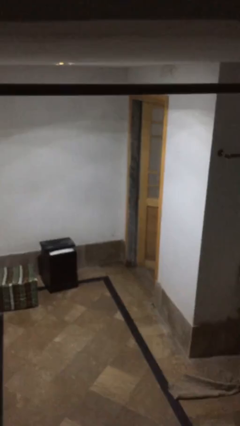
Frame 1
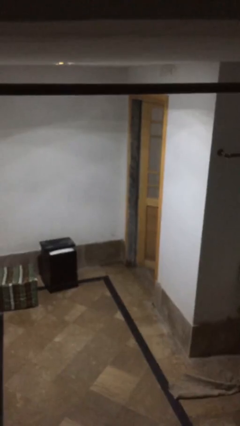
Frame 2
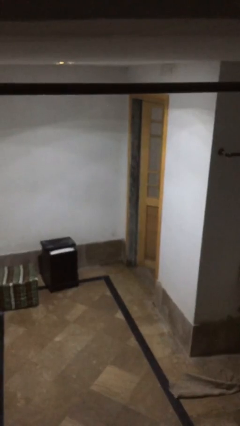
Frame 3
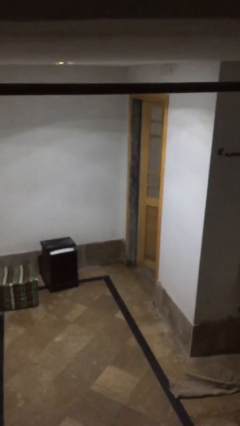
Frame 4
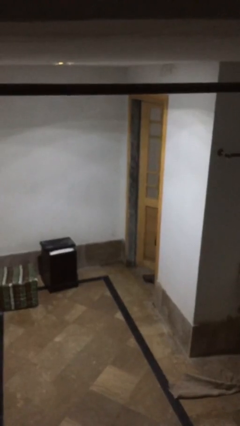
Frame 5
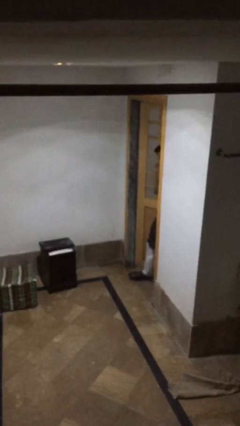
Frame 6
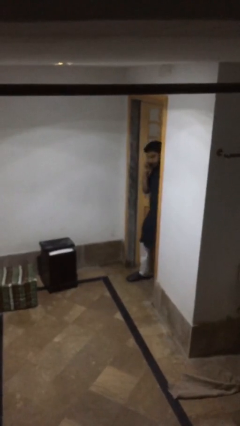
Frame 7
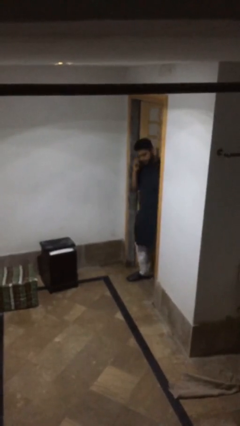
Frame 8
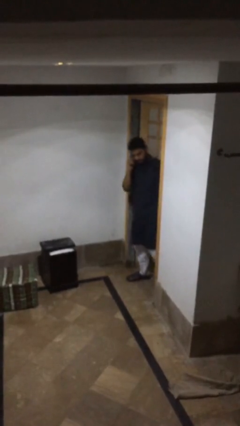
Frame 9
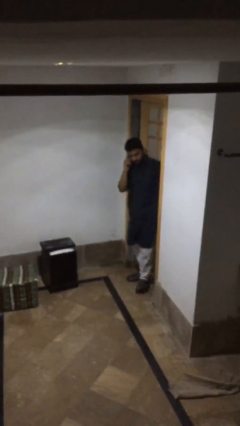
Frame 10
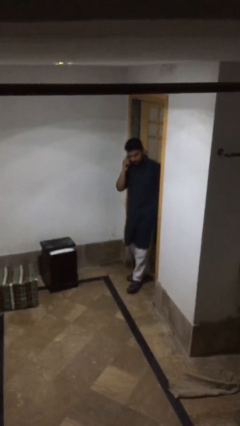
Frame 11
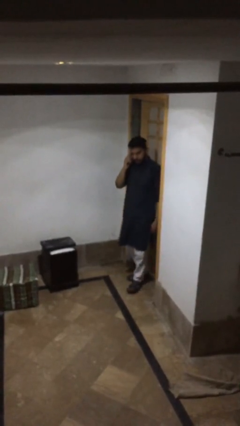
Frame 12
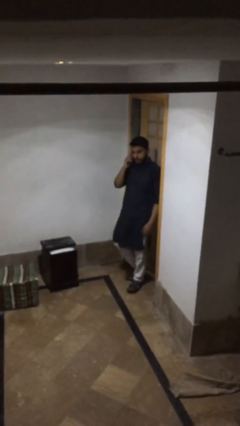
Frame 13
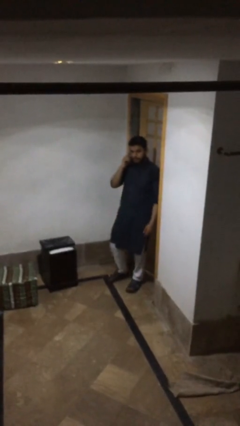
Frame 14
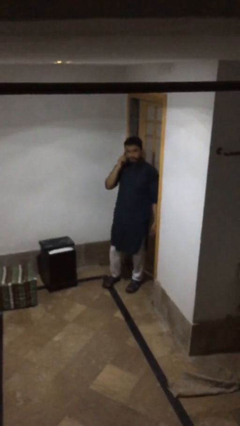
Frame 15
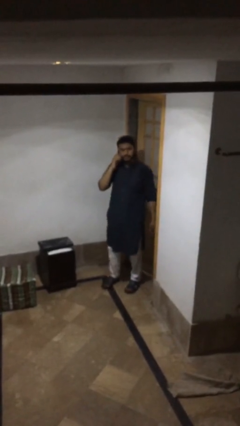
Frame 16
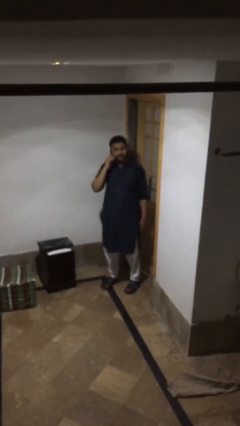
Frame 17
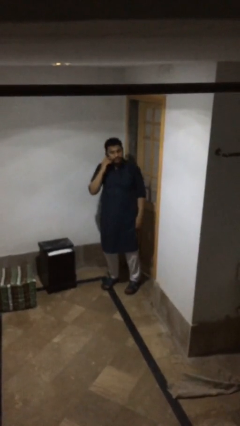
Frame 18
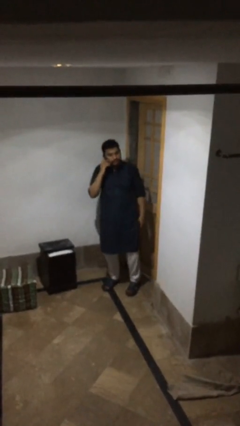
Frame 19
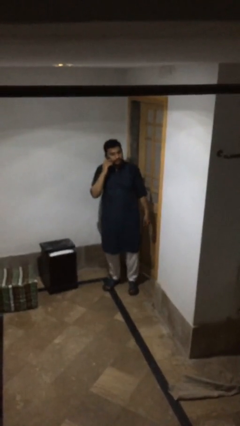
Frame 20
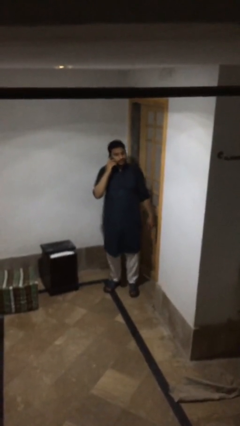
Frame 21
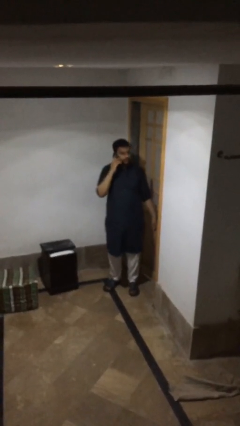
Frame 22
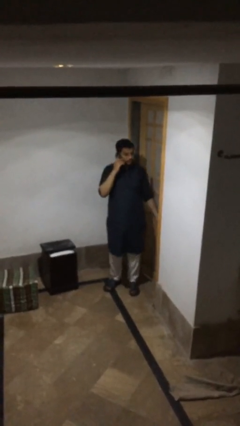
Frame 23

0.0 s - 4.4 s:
person enters scene through structure

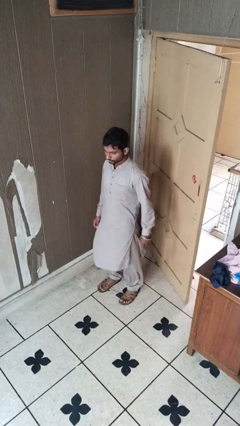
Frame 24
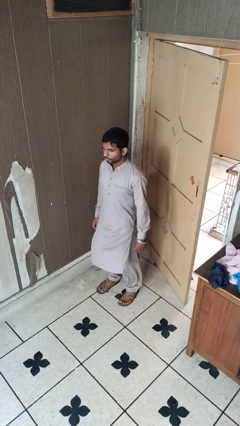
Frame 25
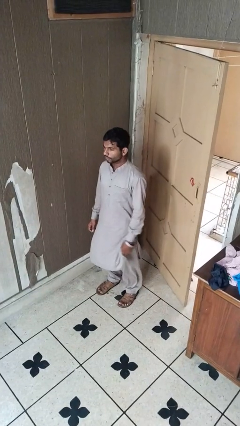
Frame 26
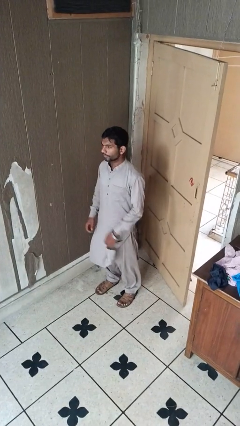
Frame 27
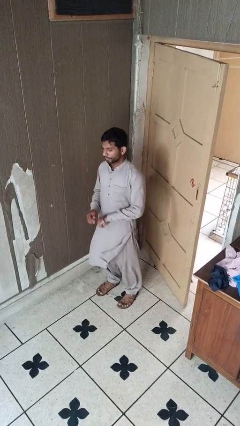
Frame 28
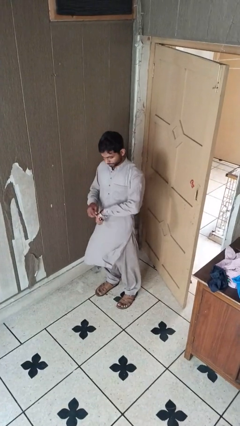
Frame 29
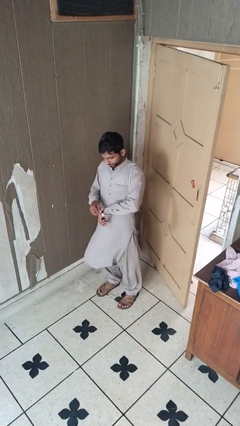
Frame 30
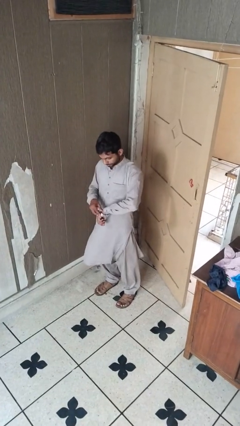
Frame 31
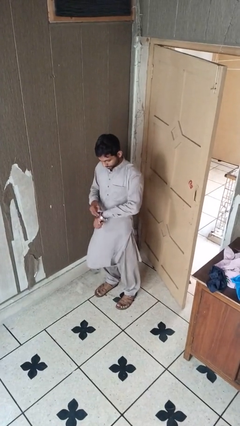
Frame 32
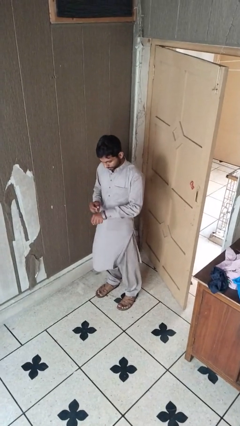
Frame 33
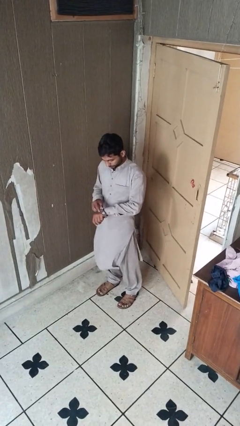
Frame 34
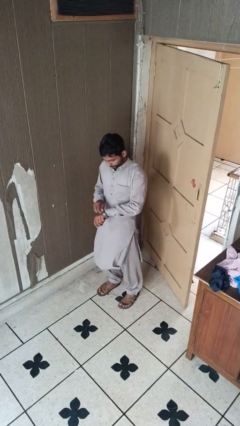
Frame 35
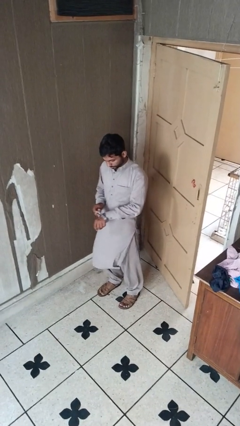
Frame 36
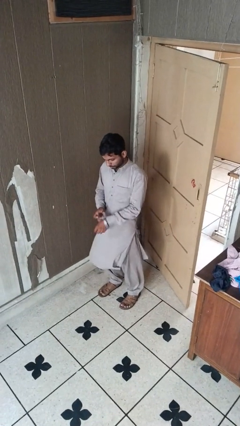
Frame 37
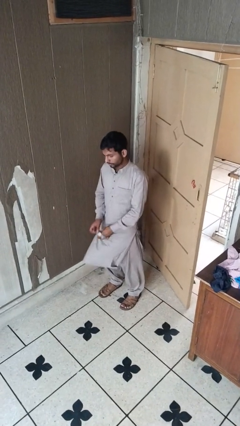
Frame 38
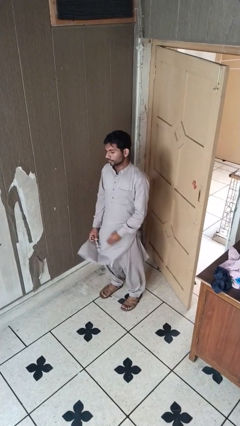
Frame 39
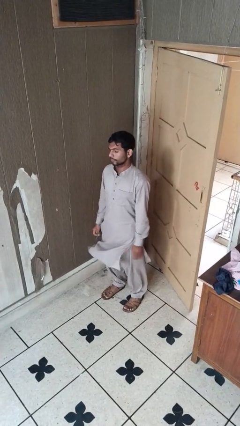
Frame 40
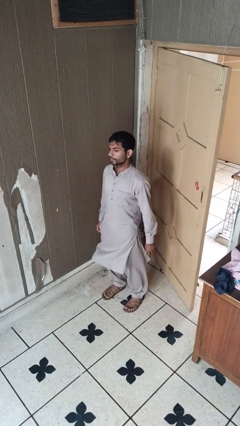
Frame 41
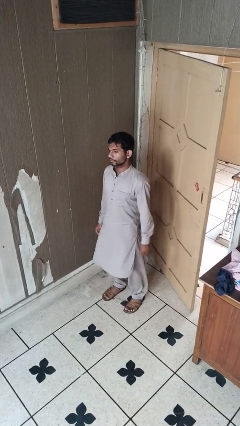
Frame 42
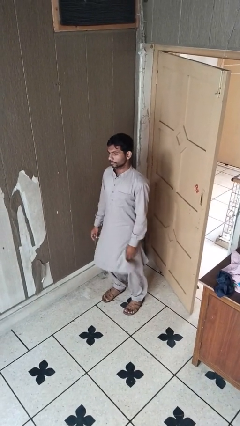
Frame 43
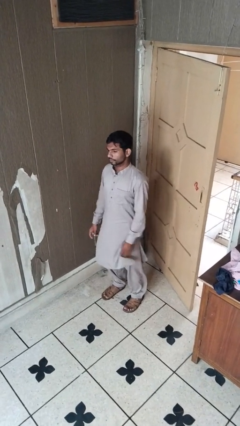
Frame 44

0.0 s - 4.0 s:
person takes off wristwatch

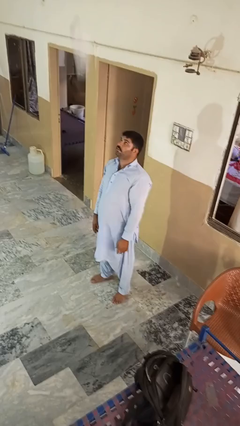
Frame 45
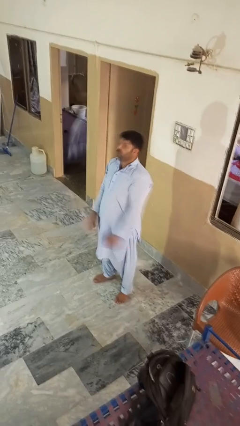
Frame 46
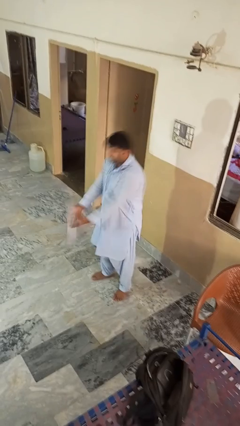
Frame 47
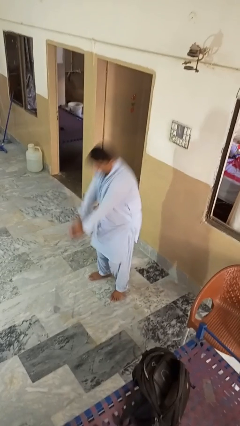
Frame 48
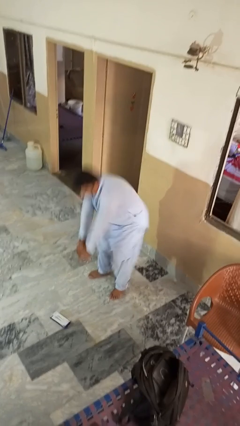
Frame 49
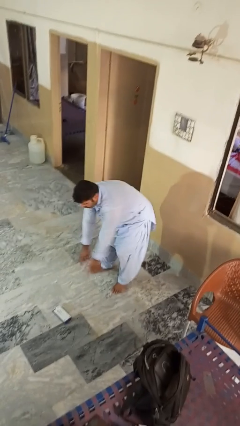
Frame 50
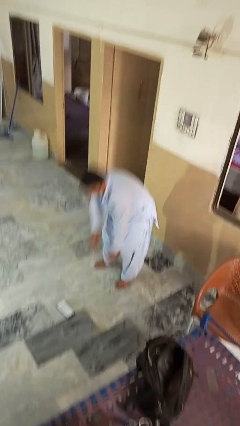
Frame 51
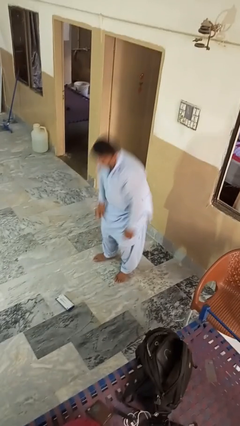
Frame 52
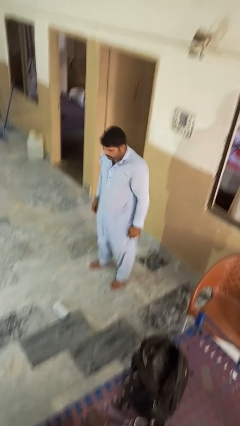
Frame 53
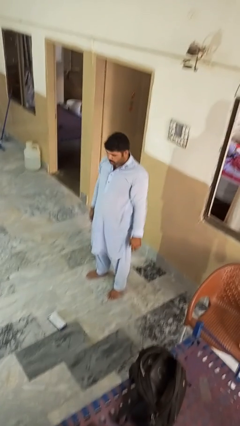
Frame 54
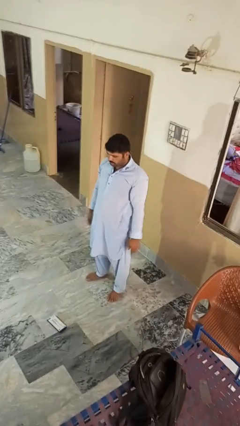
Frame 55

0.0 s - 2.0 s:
person catches dropped object

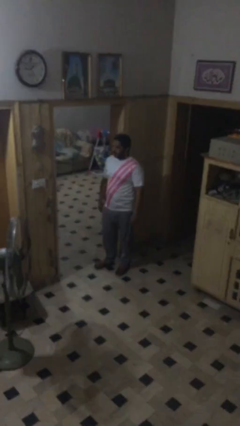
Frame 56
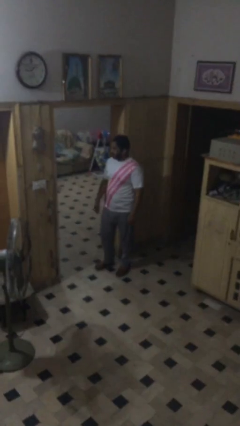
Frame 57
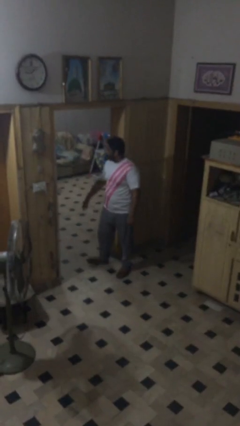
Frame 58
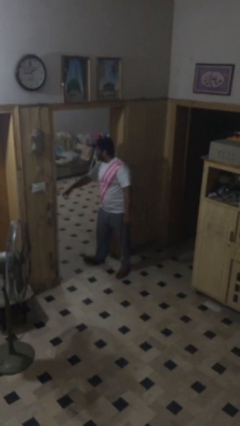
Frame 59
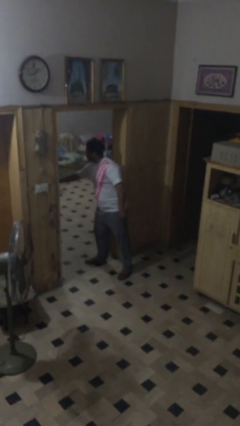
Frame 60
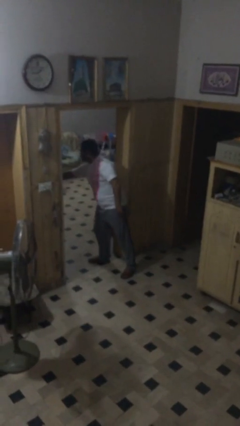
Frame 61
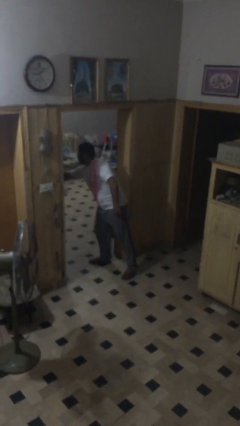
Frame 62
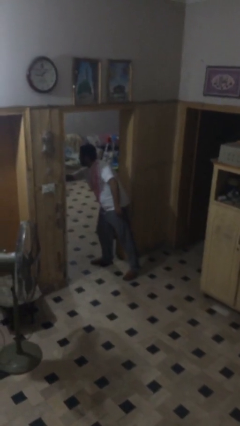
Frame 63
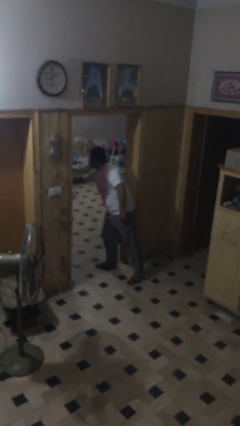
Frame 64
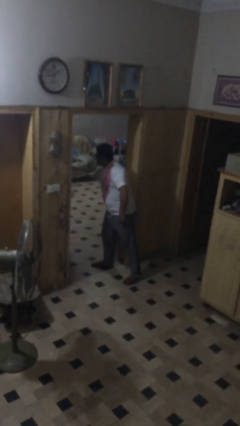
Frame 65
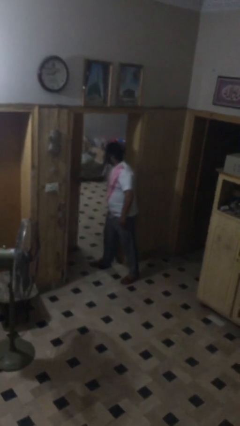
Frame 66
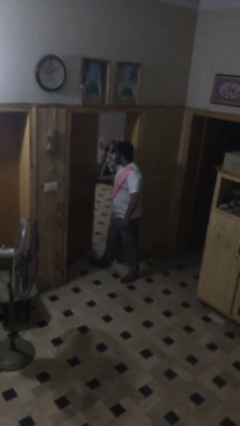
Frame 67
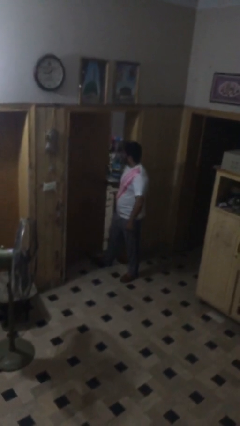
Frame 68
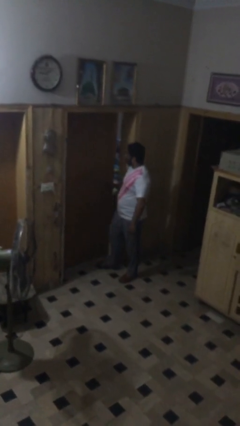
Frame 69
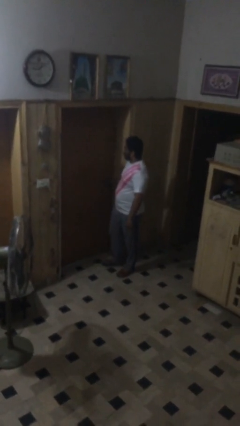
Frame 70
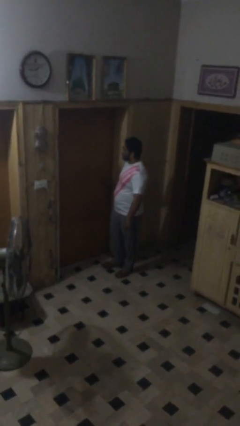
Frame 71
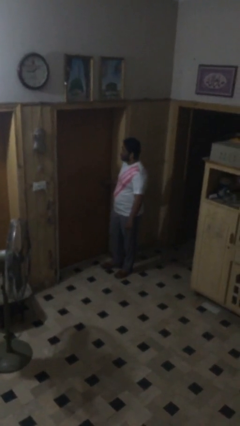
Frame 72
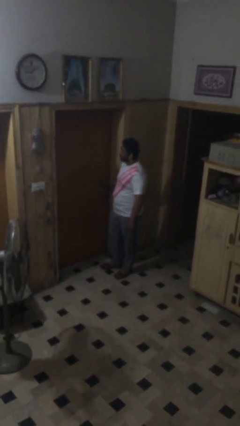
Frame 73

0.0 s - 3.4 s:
person closes facility door

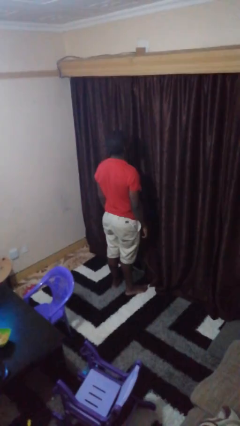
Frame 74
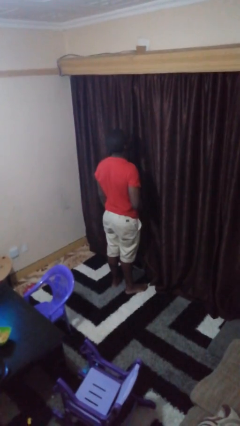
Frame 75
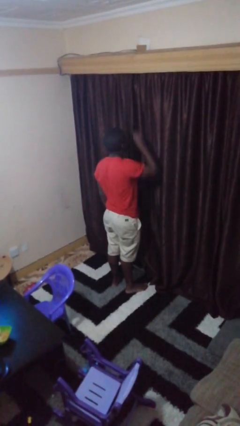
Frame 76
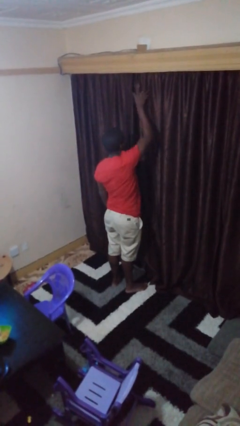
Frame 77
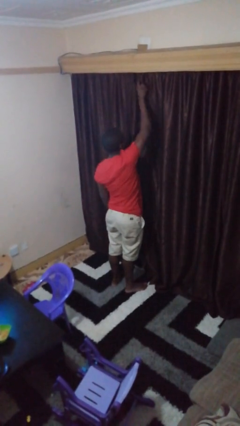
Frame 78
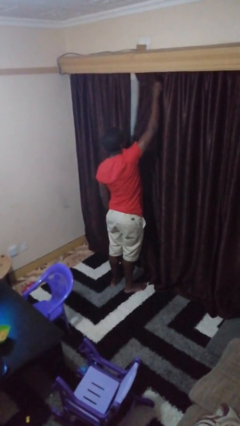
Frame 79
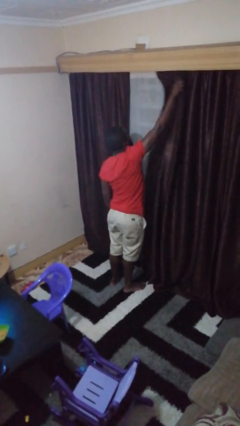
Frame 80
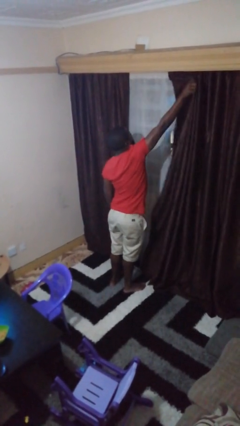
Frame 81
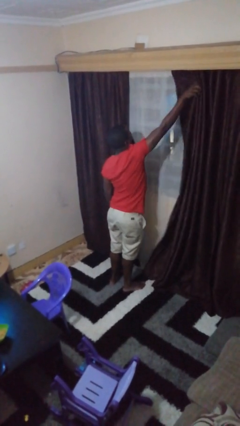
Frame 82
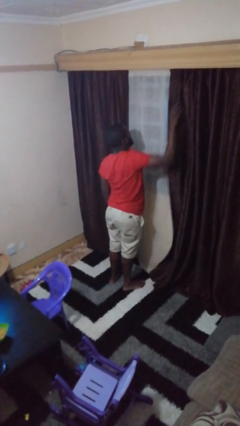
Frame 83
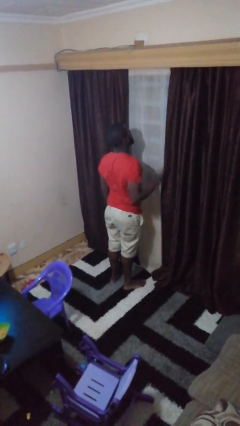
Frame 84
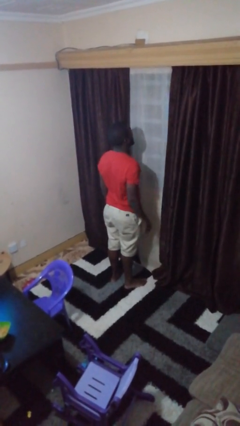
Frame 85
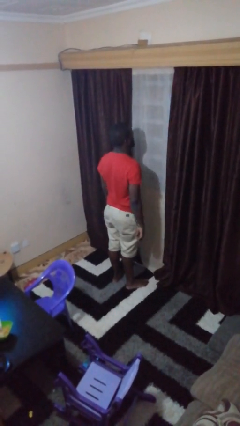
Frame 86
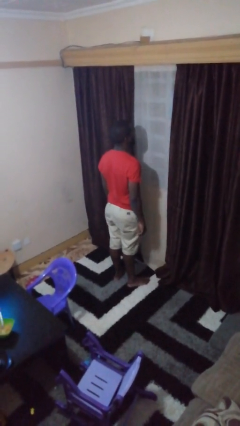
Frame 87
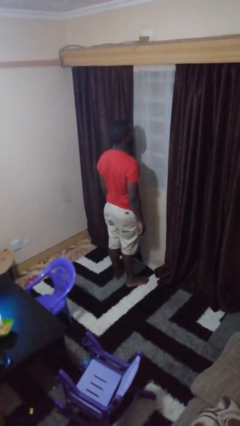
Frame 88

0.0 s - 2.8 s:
person opens curtains

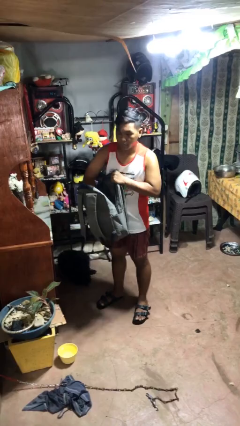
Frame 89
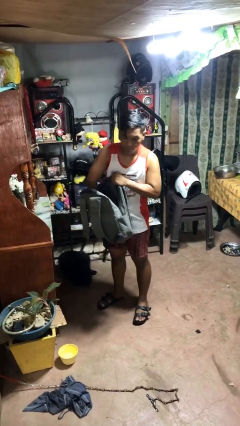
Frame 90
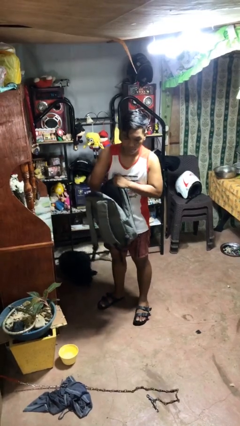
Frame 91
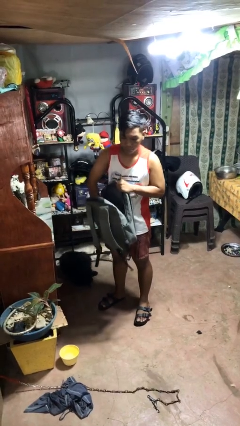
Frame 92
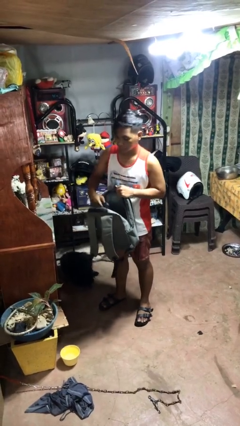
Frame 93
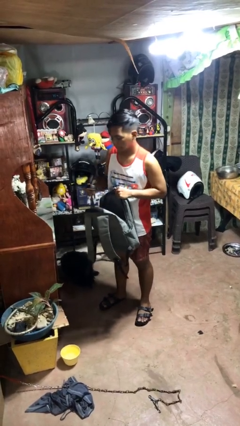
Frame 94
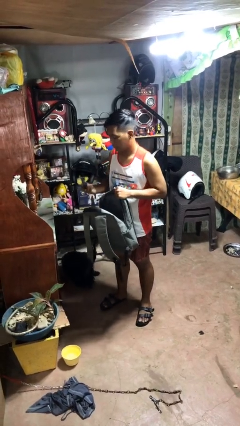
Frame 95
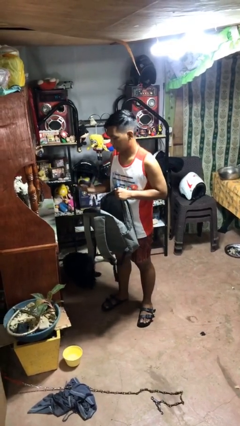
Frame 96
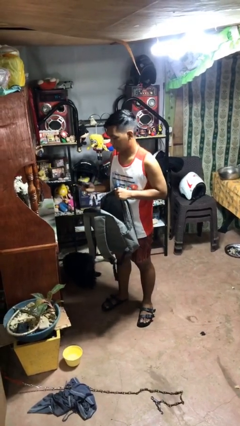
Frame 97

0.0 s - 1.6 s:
person takes object from bag
